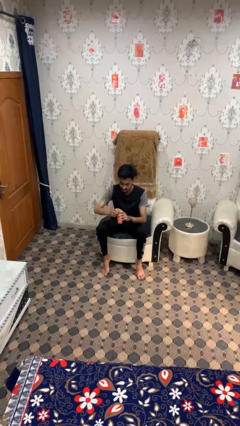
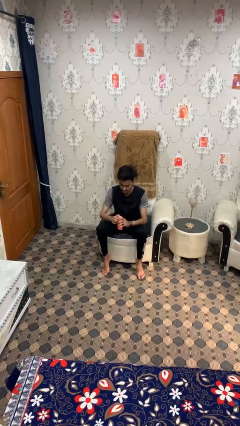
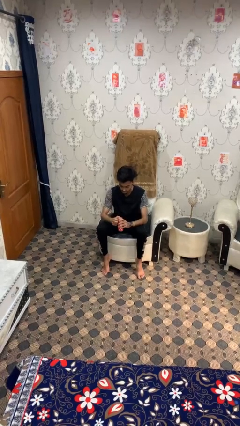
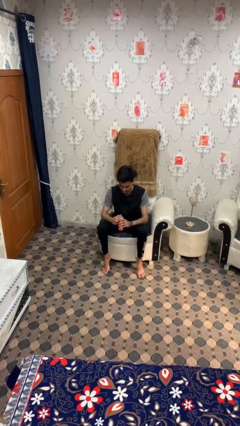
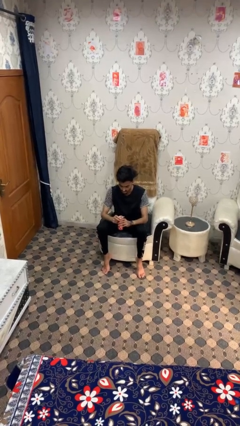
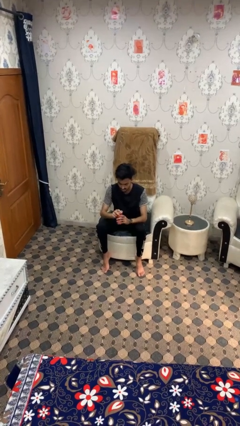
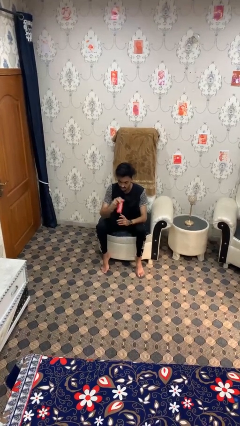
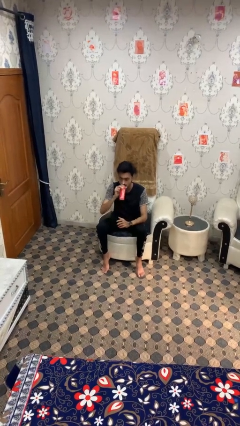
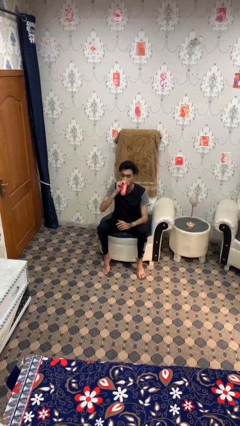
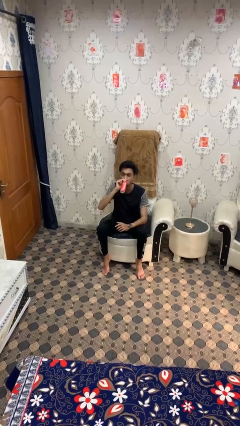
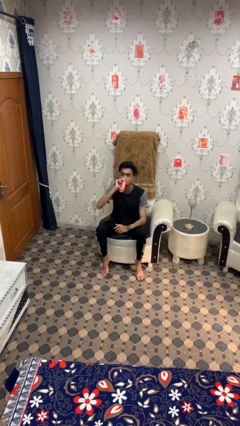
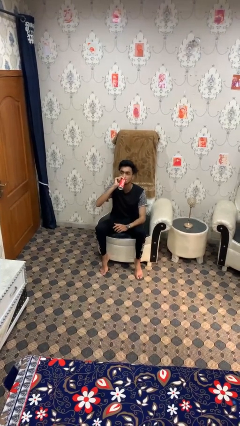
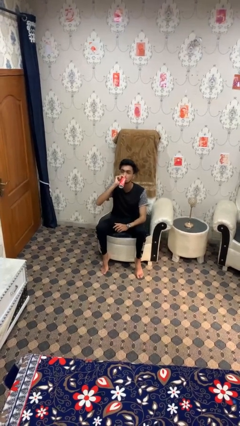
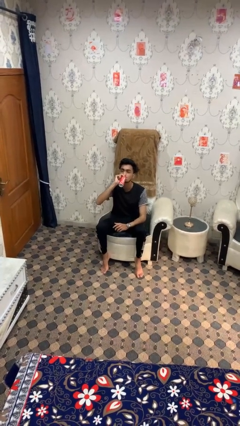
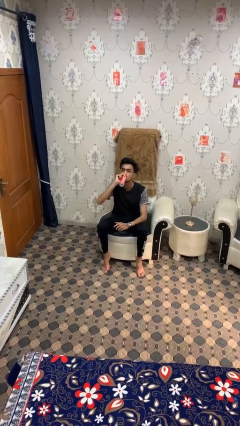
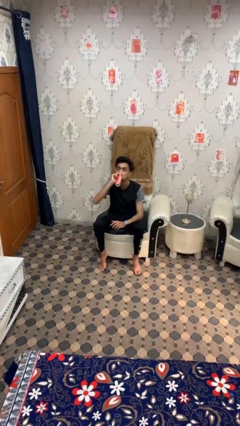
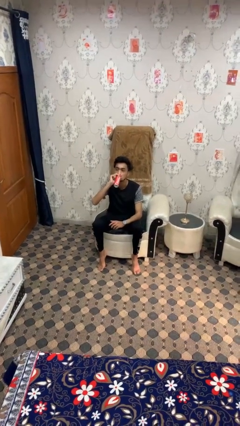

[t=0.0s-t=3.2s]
person drinks from beverage can

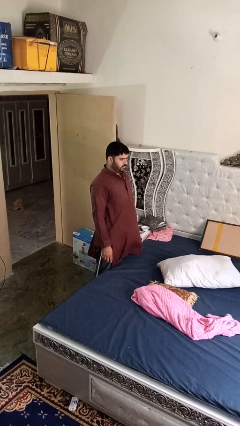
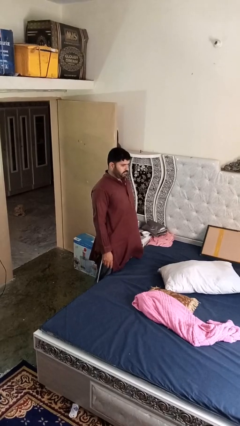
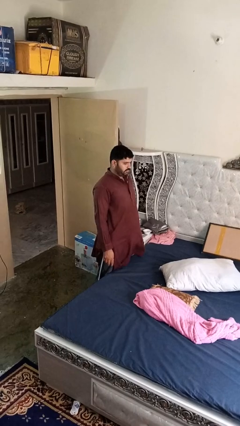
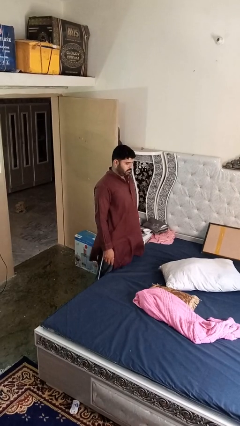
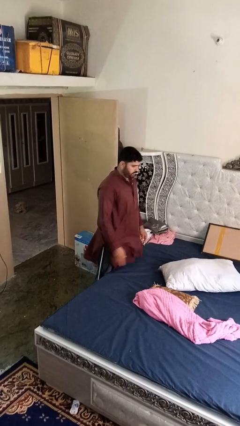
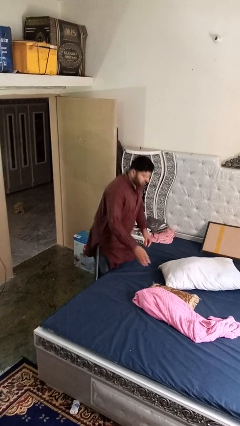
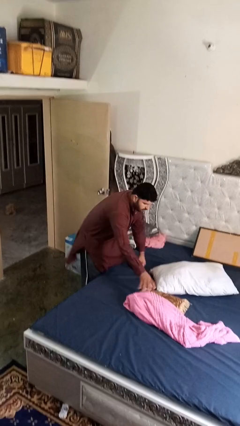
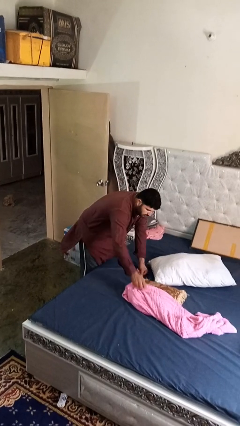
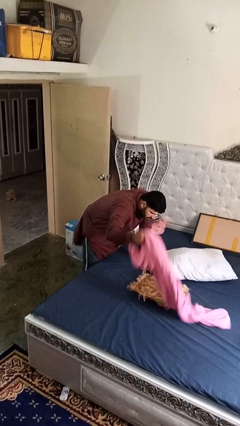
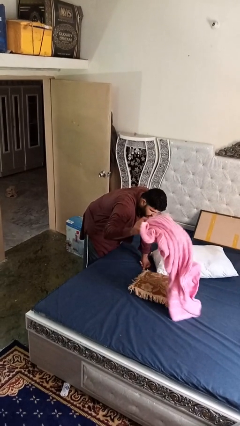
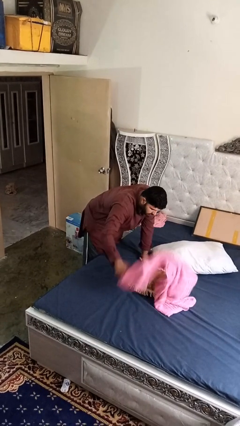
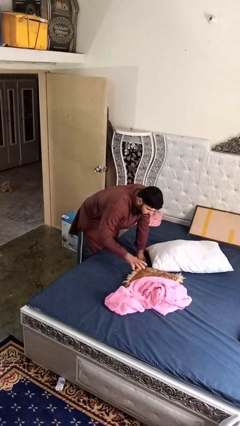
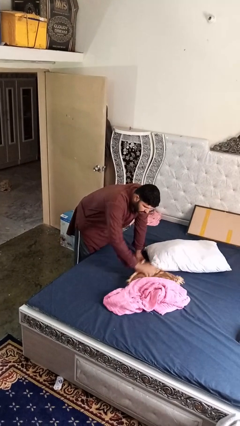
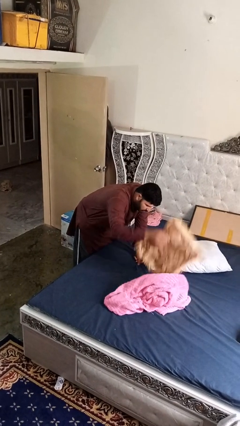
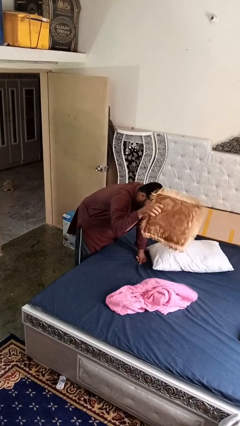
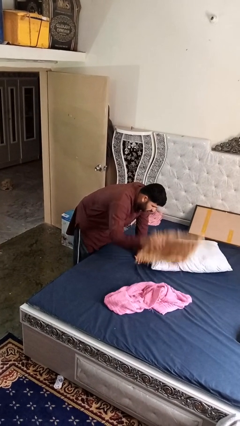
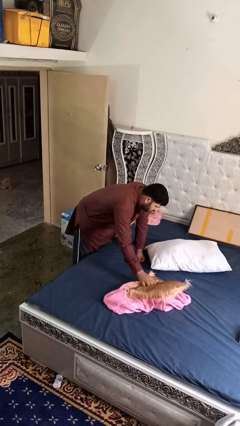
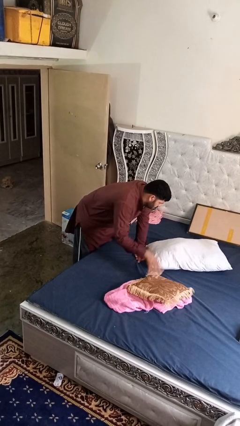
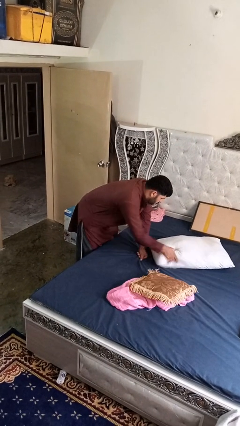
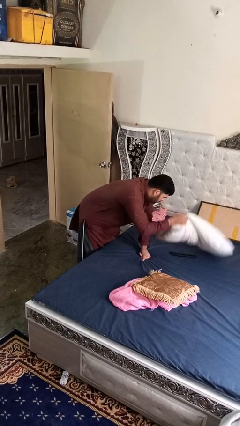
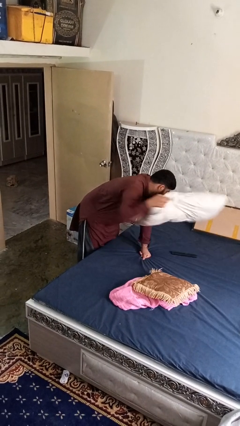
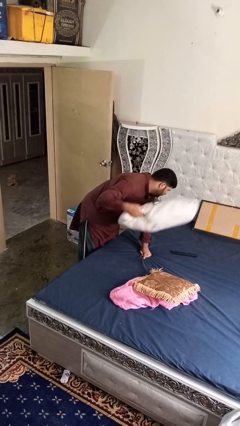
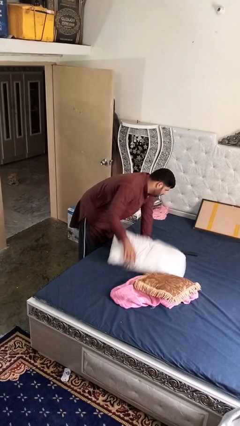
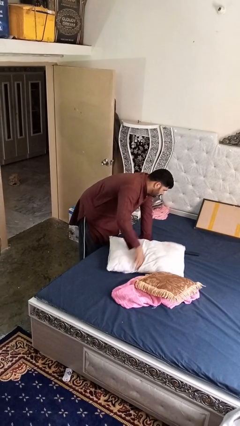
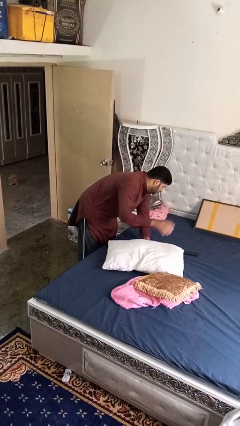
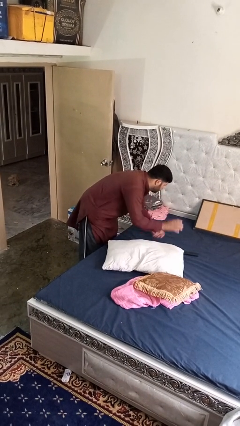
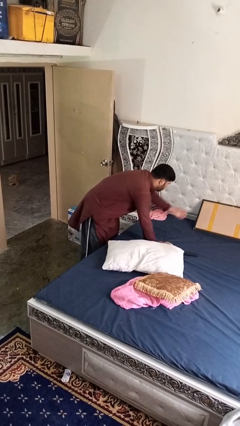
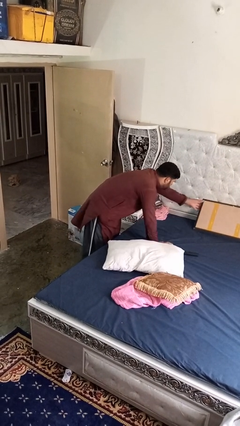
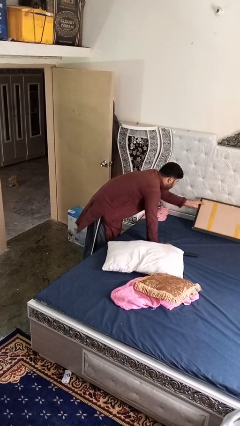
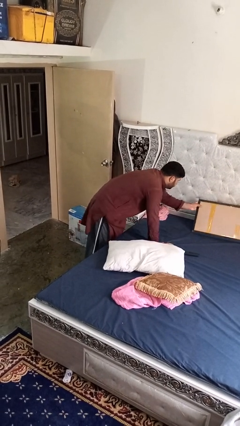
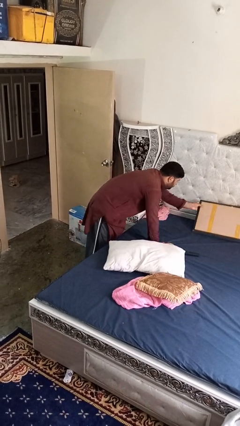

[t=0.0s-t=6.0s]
person searches under bed

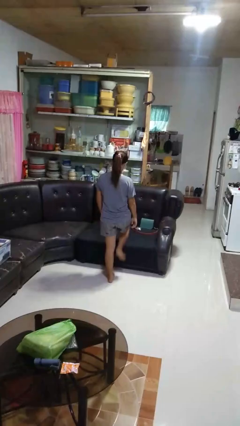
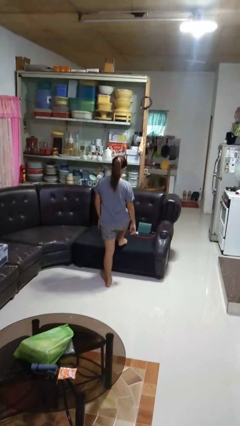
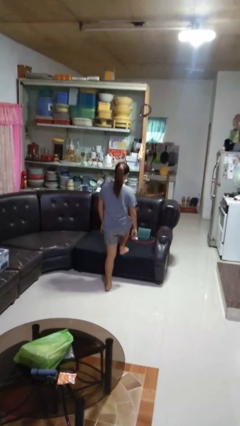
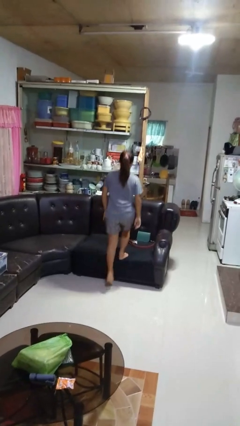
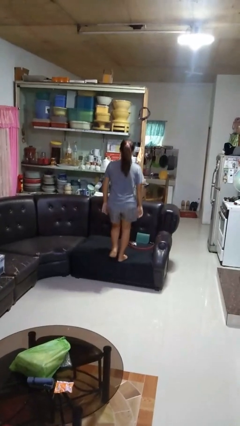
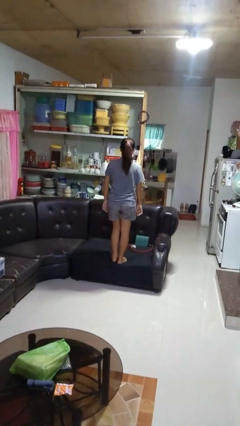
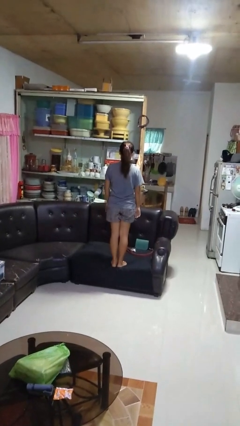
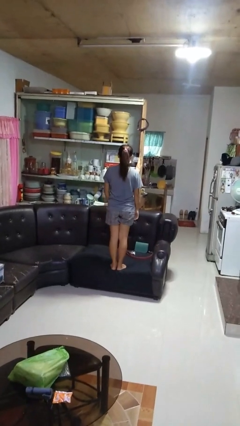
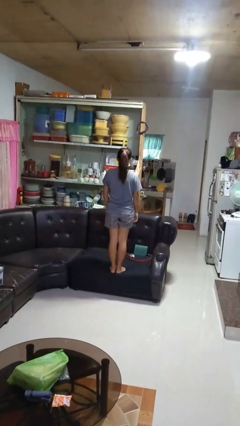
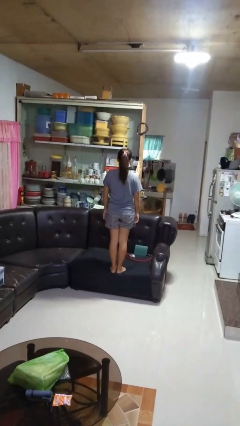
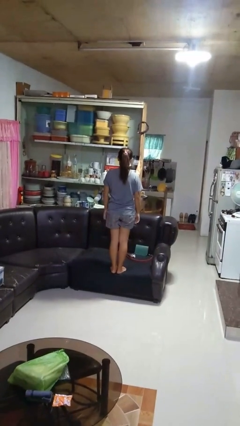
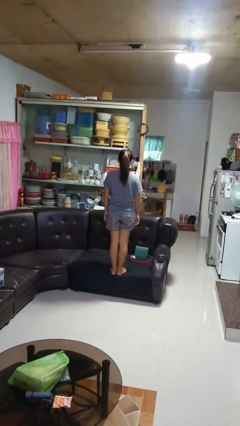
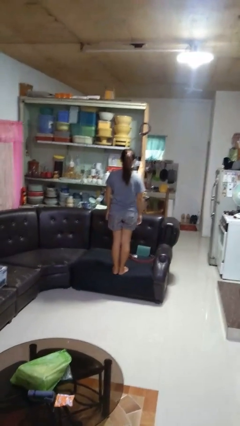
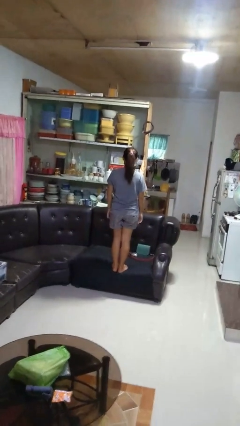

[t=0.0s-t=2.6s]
person climbs on couch

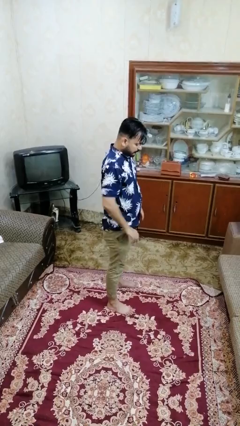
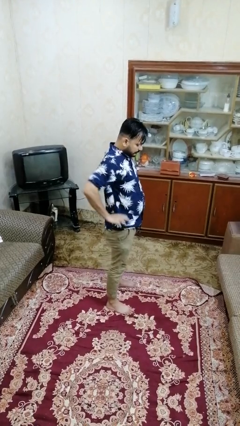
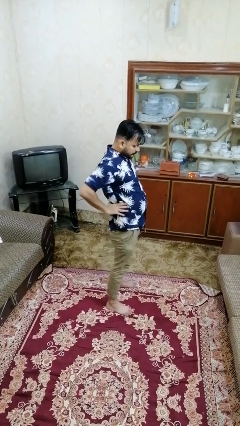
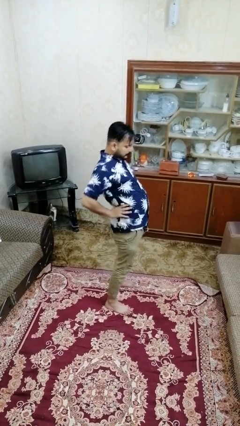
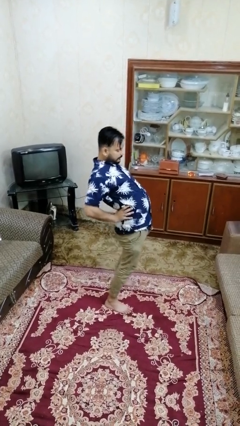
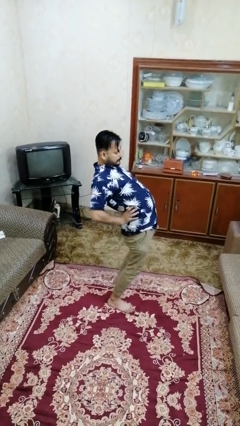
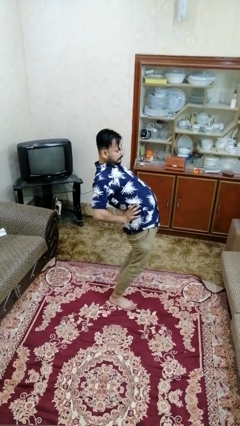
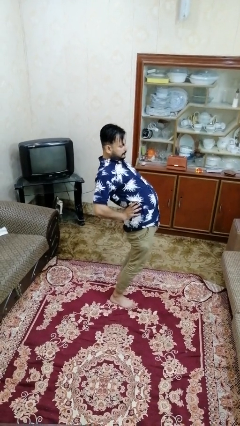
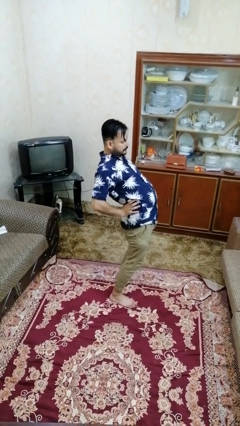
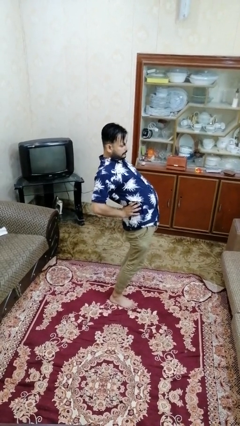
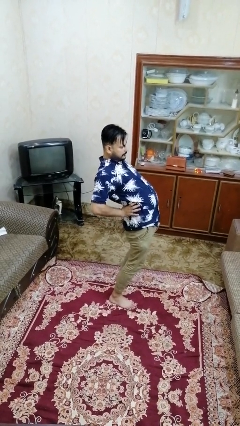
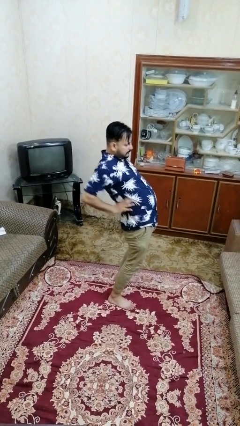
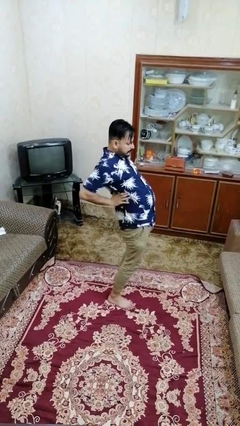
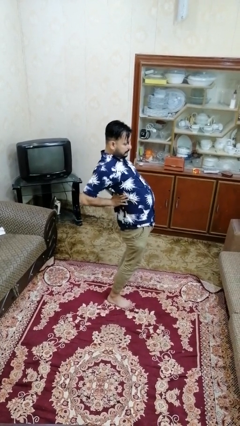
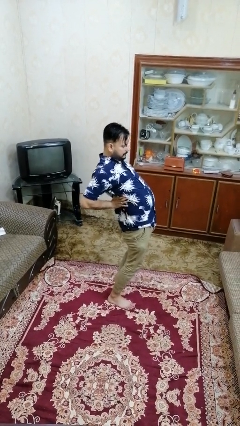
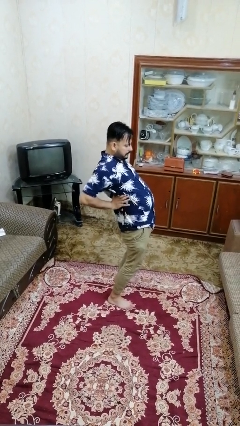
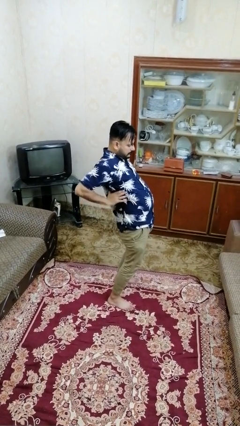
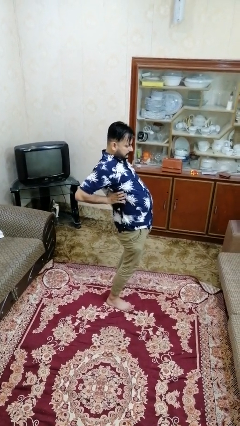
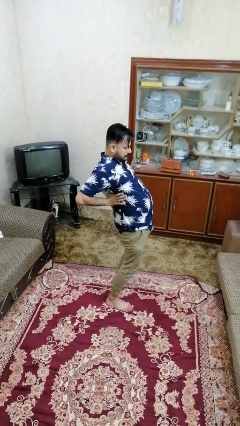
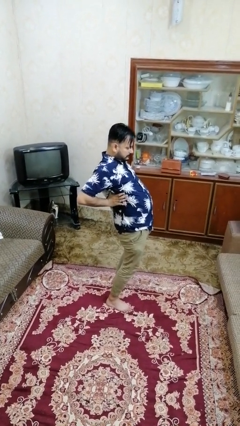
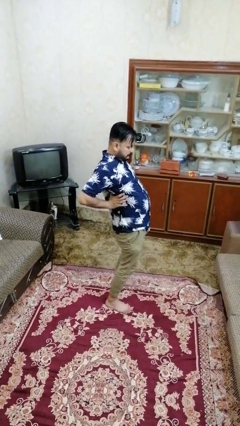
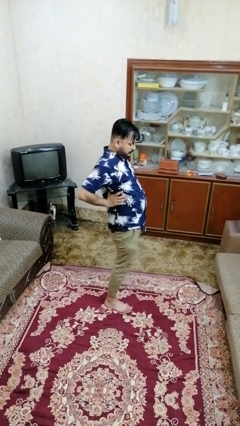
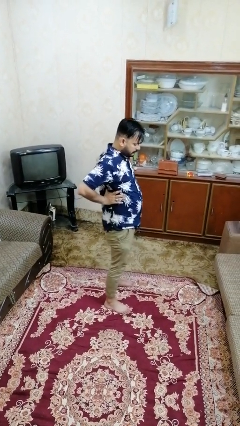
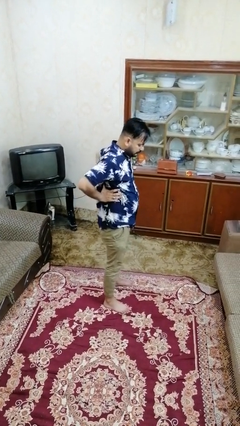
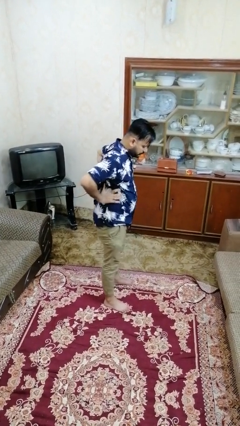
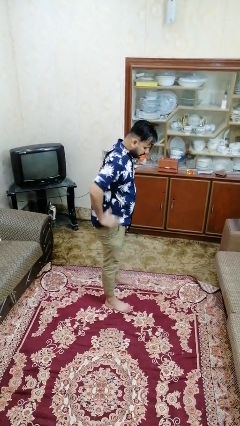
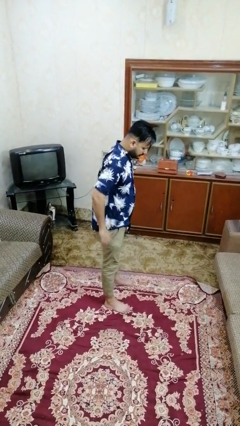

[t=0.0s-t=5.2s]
person stretches back

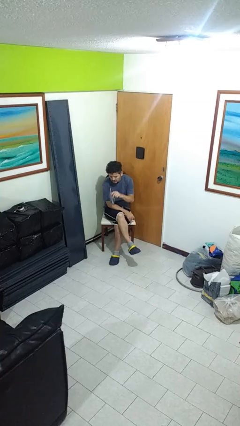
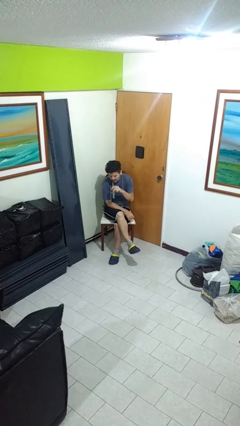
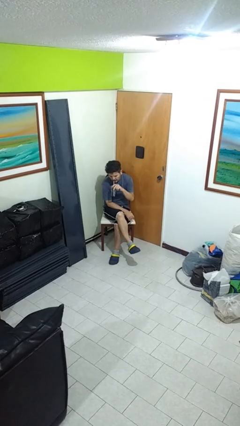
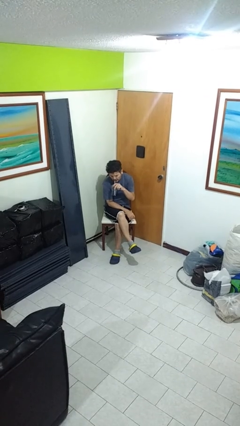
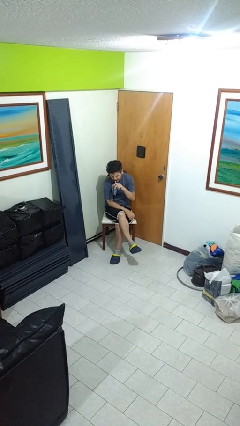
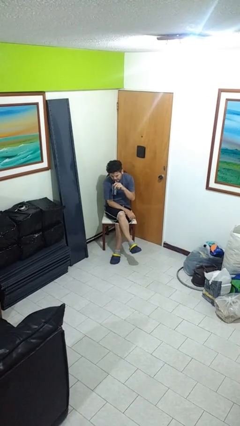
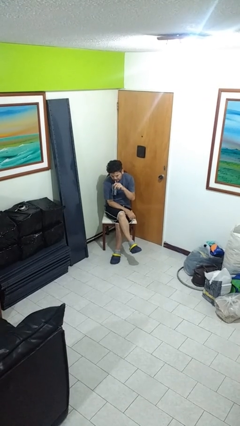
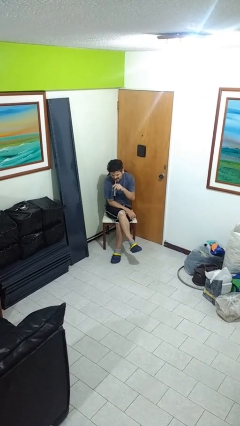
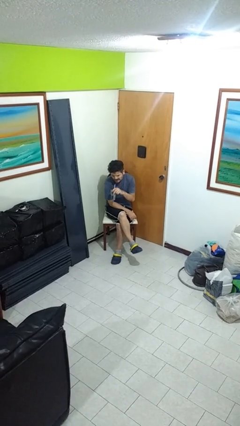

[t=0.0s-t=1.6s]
person drinks from straw
